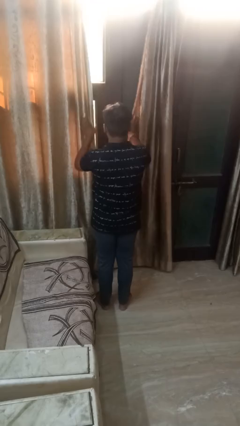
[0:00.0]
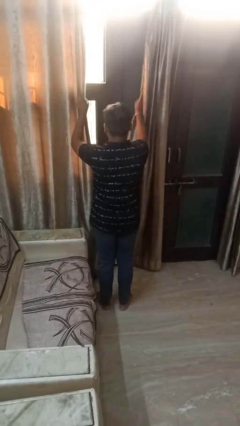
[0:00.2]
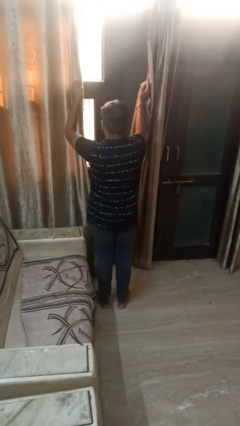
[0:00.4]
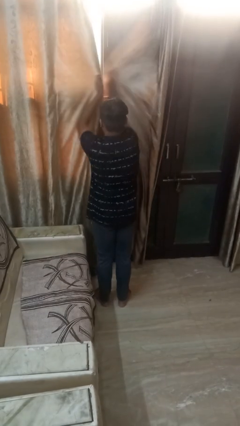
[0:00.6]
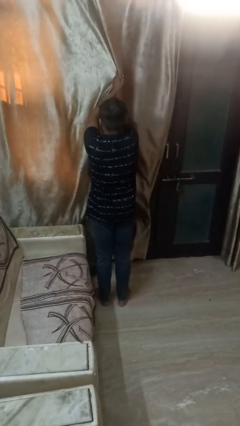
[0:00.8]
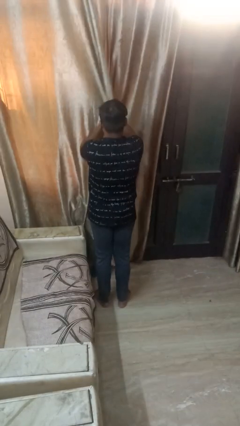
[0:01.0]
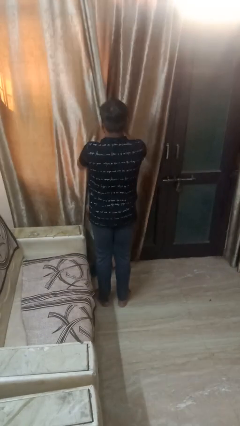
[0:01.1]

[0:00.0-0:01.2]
person closes curtains

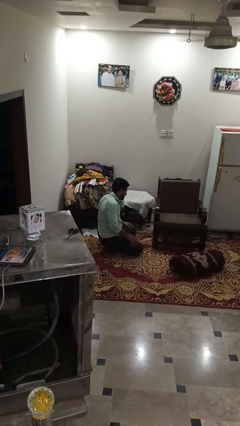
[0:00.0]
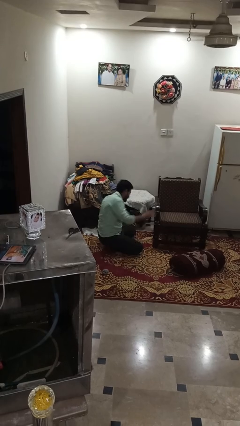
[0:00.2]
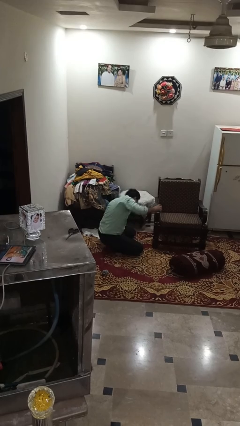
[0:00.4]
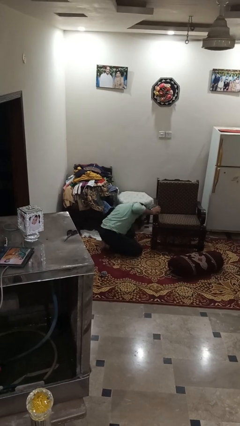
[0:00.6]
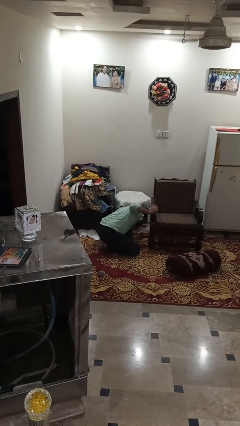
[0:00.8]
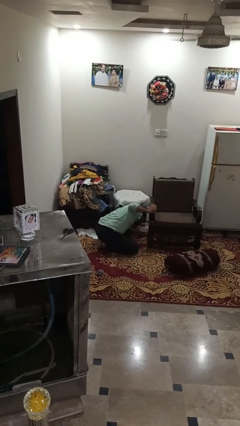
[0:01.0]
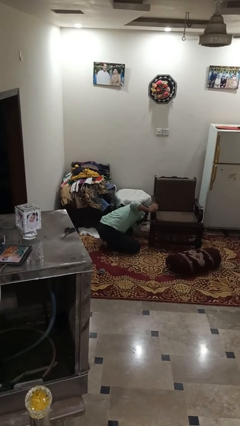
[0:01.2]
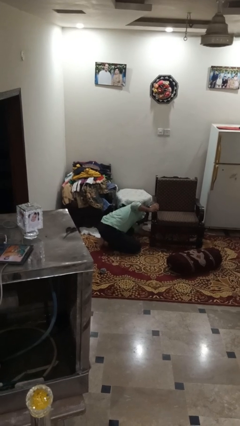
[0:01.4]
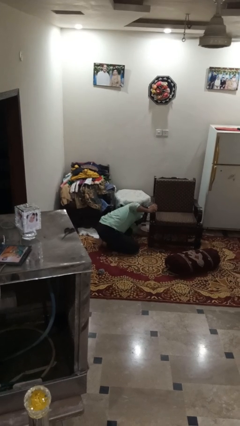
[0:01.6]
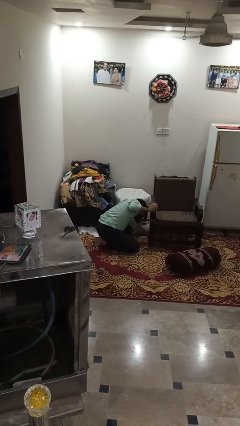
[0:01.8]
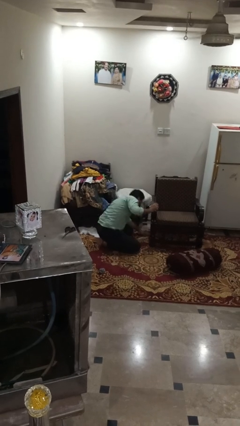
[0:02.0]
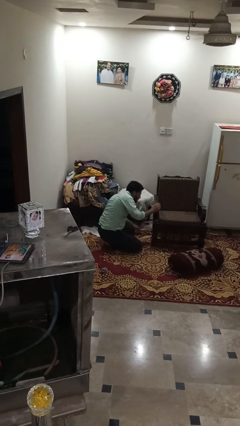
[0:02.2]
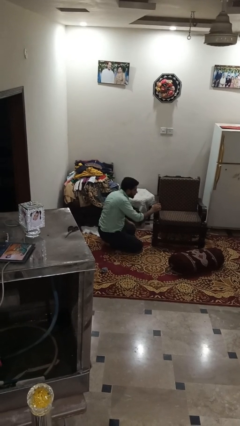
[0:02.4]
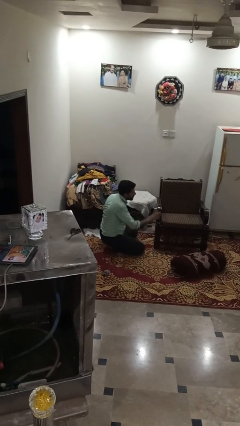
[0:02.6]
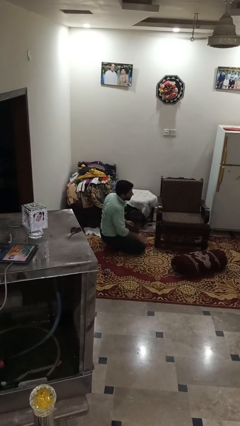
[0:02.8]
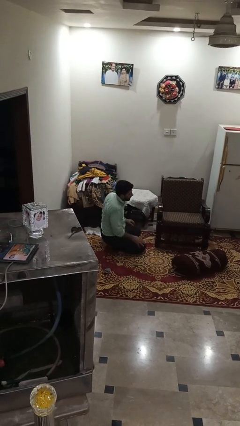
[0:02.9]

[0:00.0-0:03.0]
person searches in couch

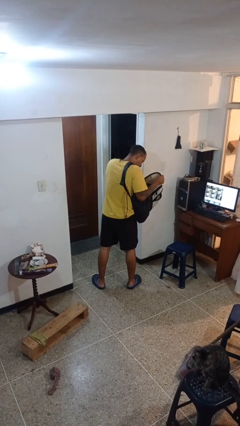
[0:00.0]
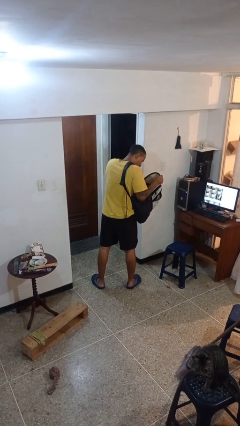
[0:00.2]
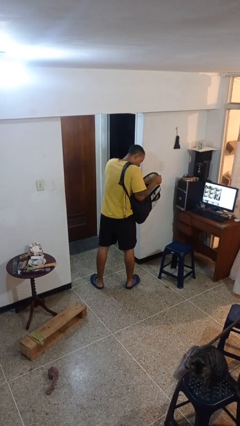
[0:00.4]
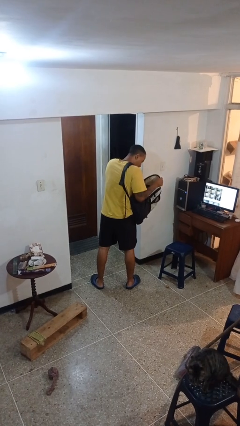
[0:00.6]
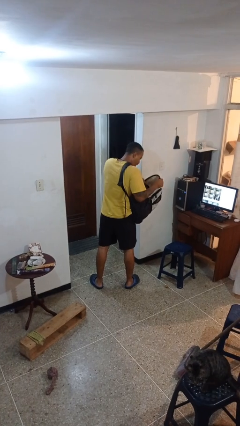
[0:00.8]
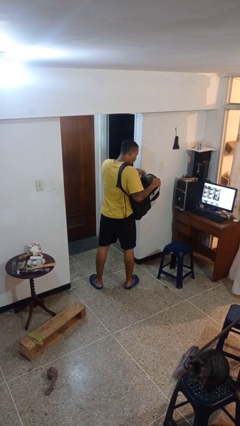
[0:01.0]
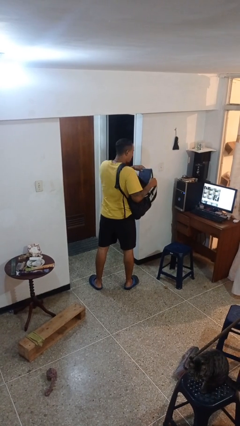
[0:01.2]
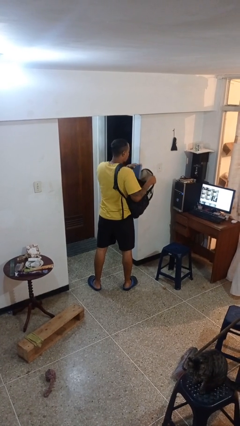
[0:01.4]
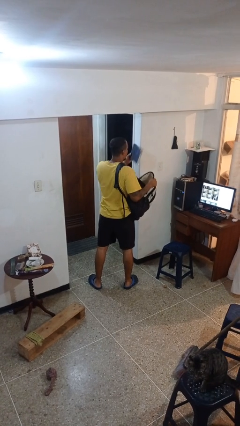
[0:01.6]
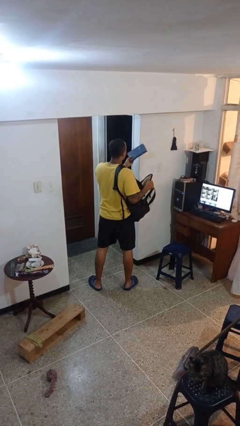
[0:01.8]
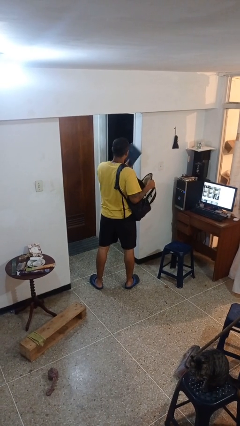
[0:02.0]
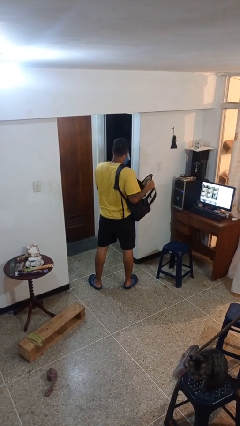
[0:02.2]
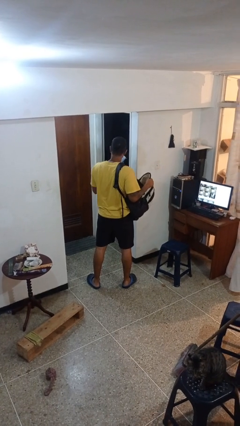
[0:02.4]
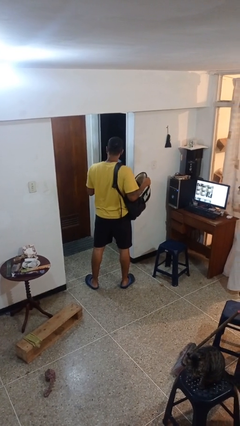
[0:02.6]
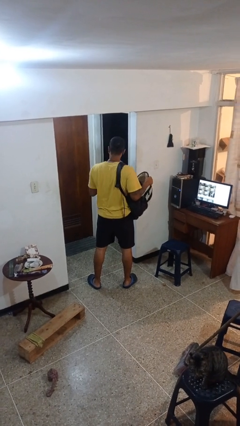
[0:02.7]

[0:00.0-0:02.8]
person takes object from backpack

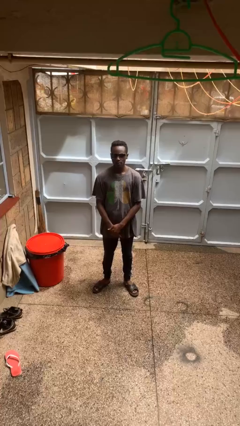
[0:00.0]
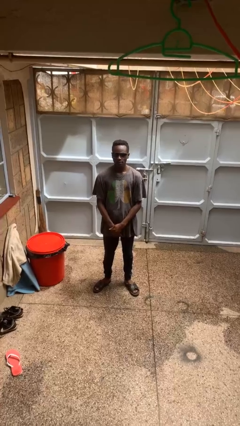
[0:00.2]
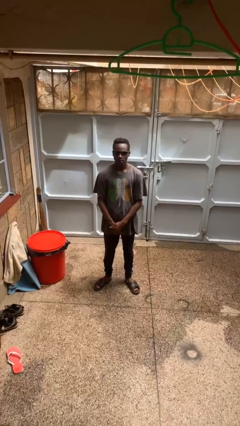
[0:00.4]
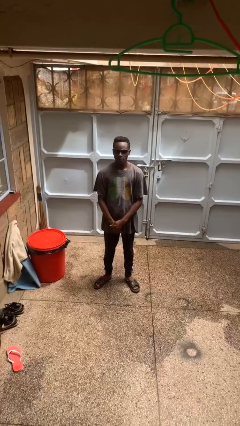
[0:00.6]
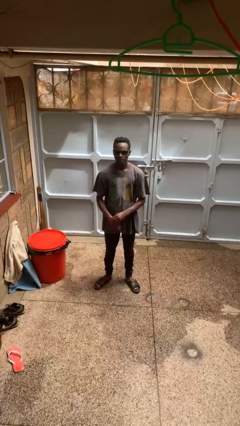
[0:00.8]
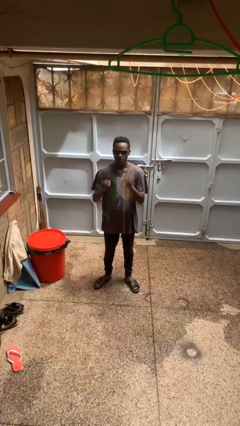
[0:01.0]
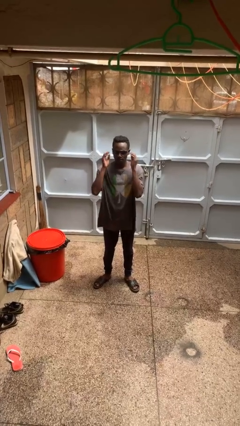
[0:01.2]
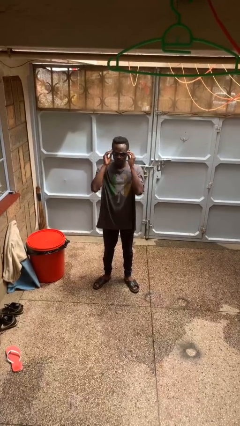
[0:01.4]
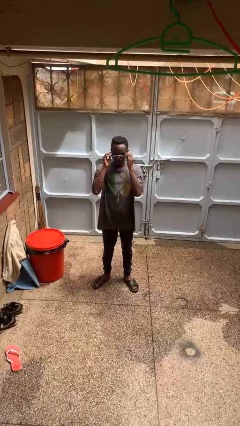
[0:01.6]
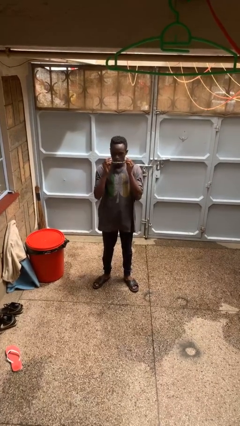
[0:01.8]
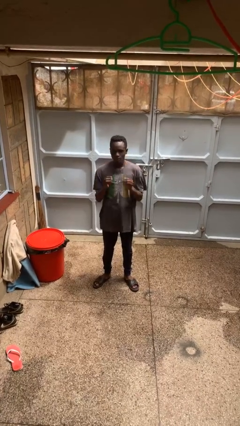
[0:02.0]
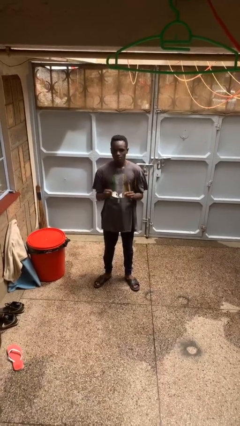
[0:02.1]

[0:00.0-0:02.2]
person takes off sunglasses

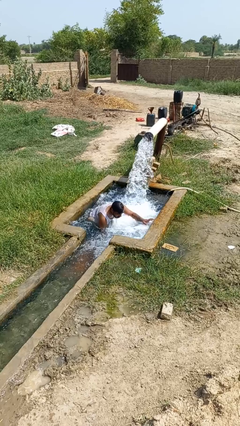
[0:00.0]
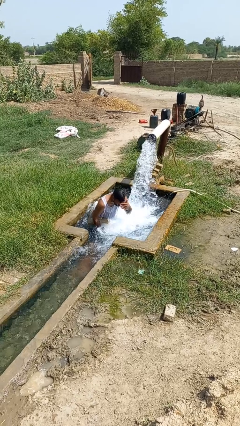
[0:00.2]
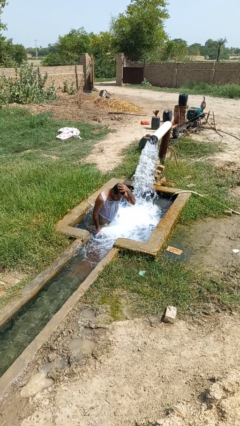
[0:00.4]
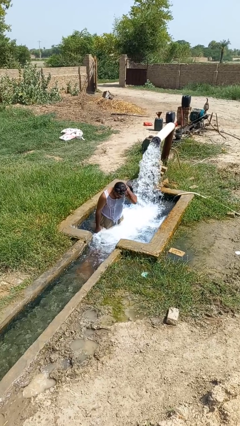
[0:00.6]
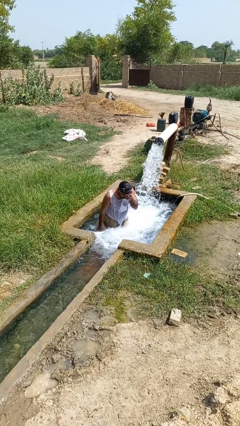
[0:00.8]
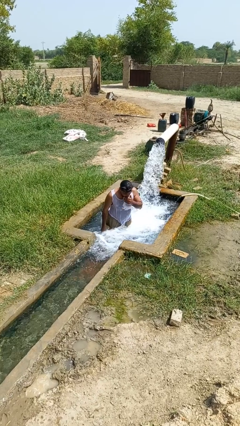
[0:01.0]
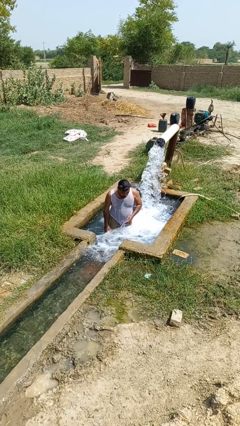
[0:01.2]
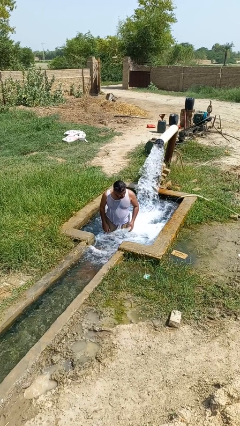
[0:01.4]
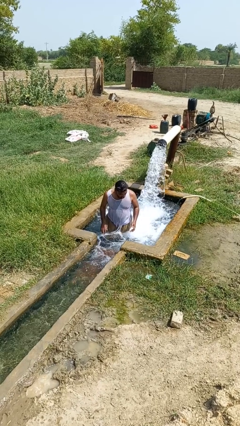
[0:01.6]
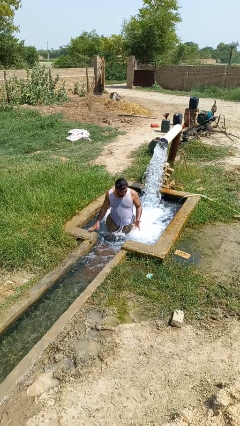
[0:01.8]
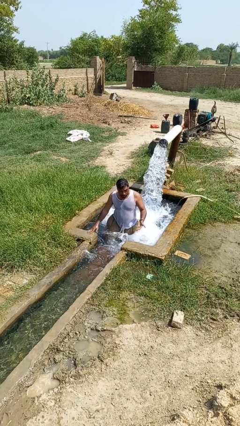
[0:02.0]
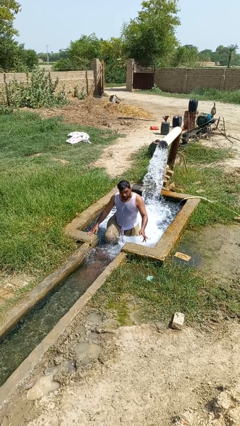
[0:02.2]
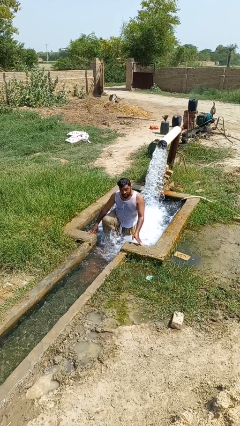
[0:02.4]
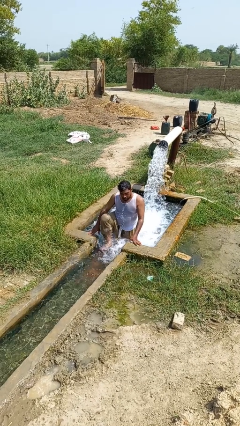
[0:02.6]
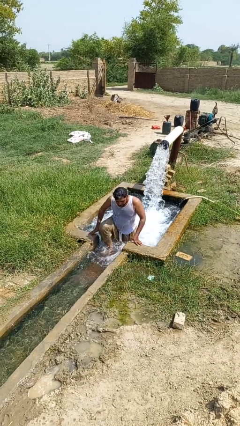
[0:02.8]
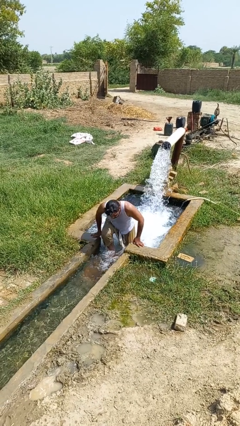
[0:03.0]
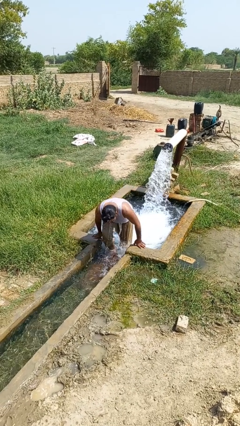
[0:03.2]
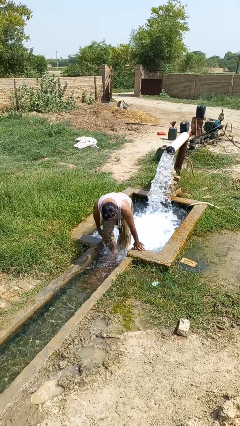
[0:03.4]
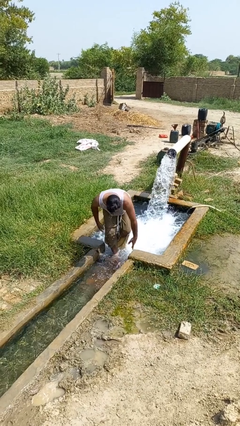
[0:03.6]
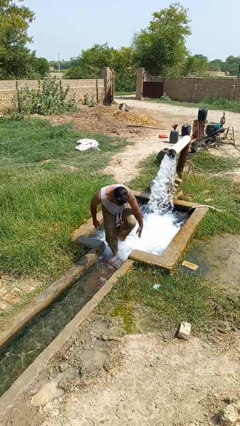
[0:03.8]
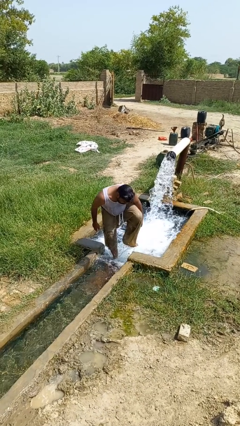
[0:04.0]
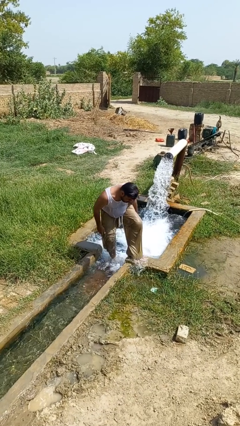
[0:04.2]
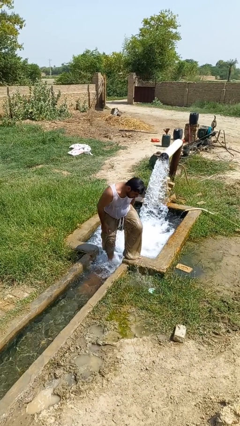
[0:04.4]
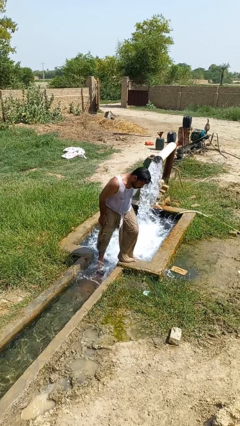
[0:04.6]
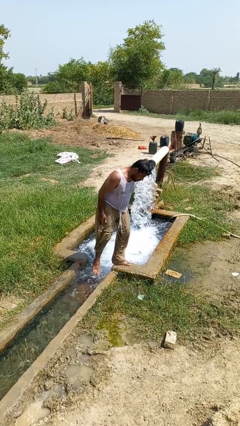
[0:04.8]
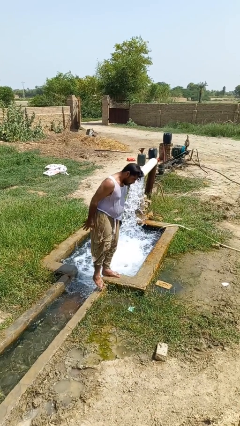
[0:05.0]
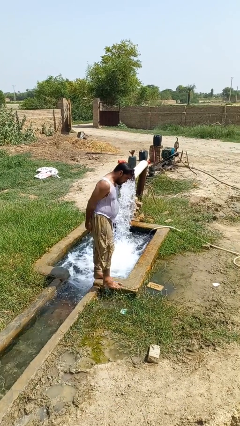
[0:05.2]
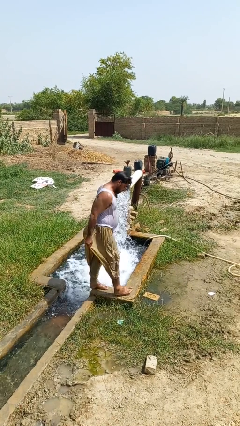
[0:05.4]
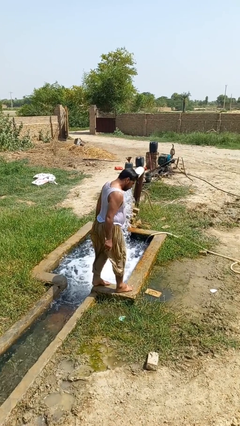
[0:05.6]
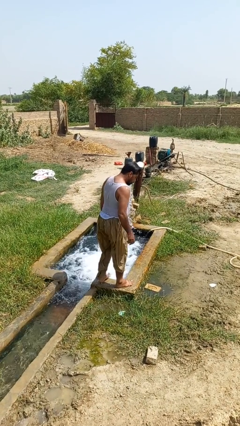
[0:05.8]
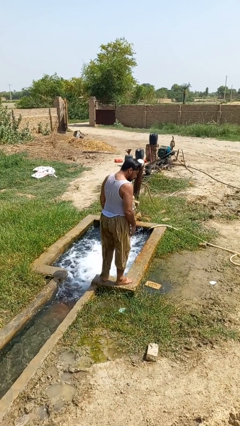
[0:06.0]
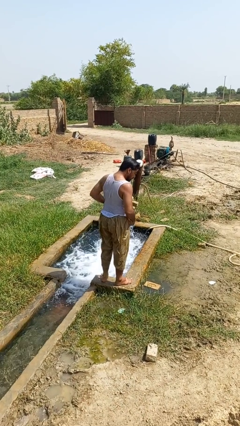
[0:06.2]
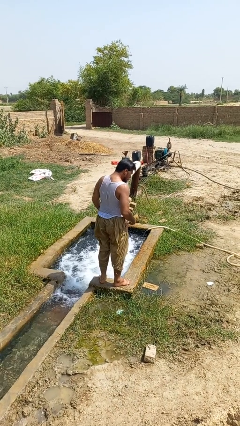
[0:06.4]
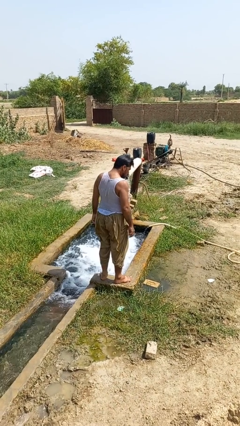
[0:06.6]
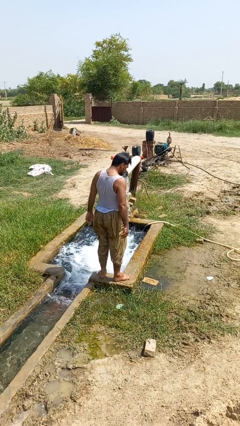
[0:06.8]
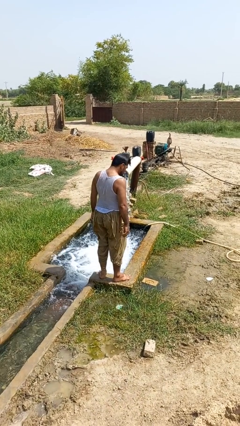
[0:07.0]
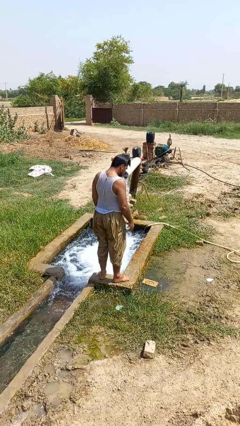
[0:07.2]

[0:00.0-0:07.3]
person exits pool

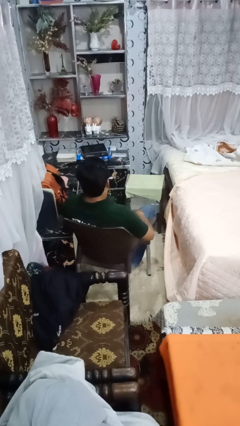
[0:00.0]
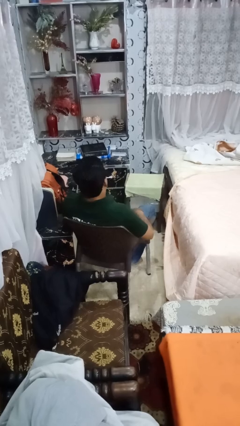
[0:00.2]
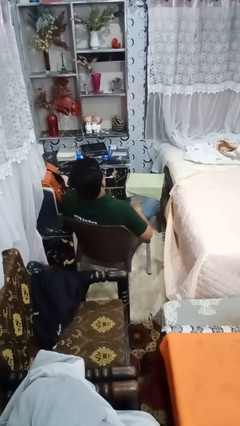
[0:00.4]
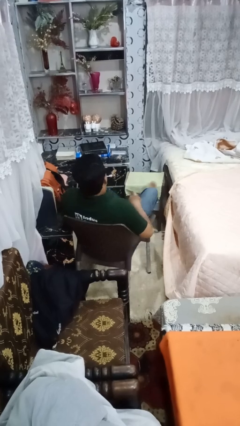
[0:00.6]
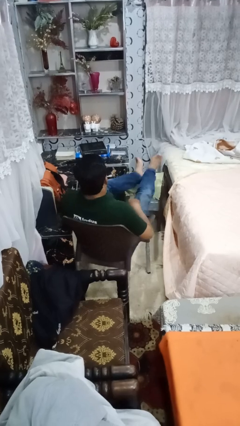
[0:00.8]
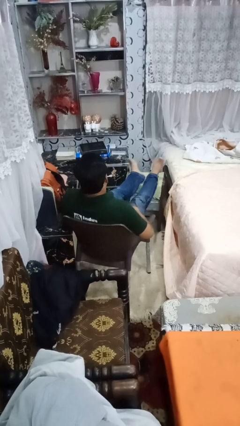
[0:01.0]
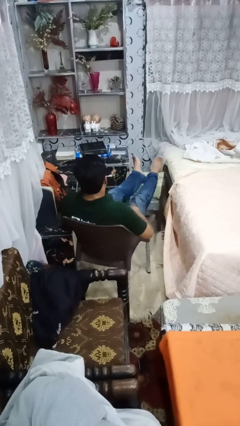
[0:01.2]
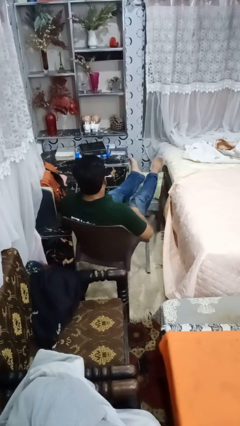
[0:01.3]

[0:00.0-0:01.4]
person puts feet up
